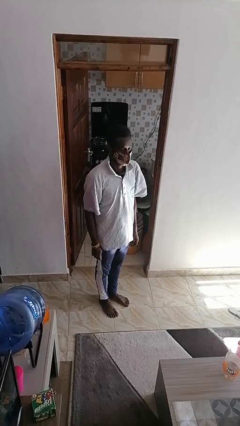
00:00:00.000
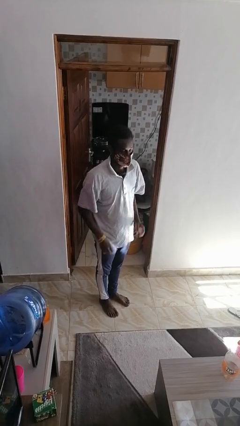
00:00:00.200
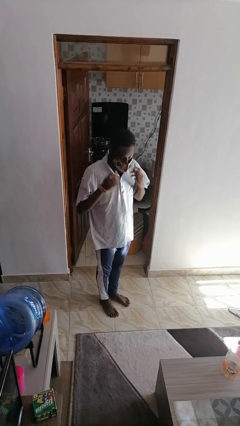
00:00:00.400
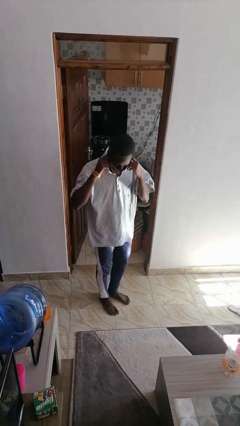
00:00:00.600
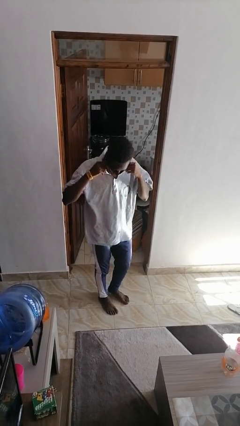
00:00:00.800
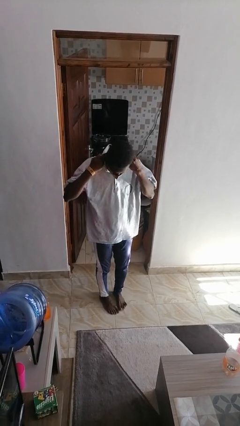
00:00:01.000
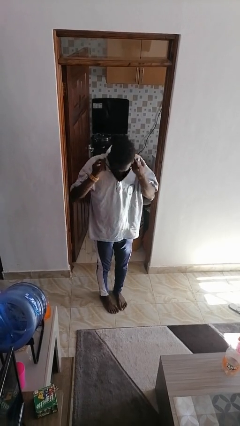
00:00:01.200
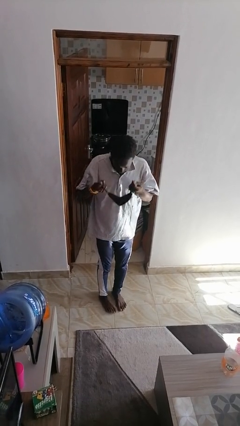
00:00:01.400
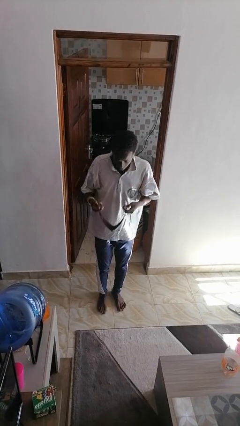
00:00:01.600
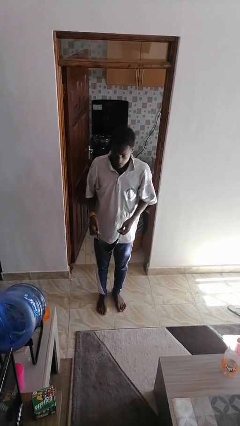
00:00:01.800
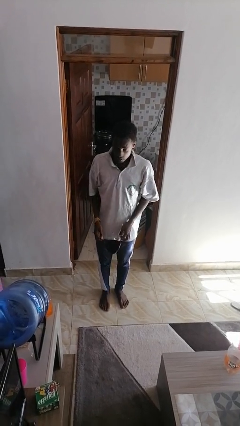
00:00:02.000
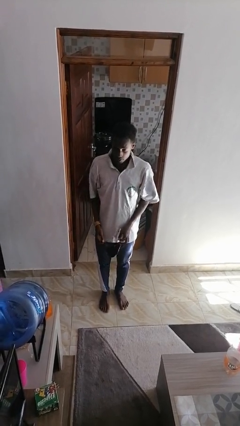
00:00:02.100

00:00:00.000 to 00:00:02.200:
person takes off facemask

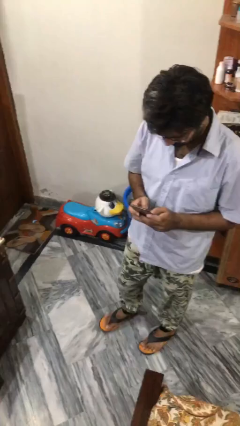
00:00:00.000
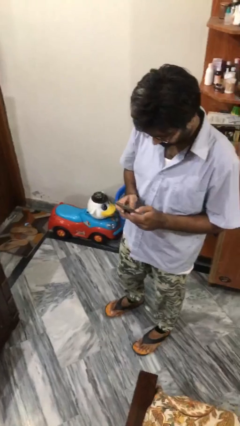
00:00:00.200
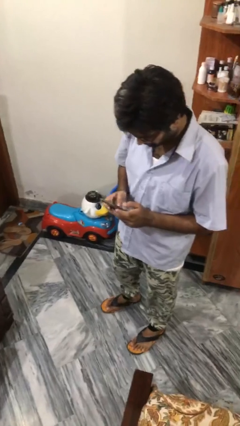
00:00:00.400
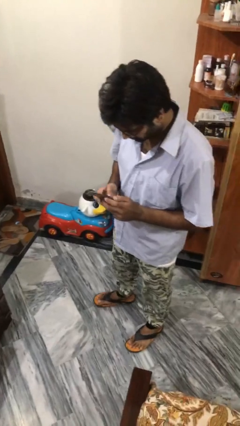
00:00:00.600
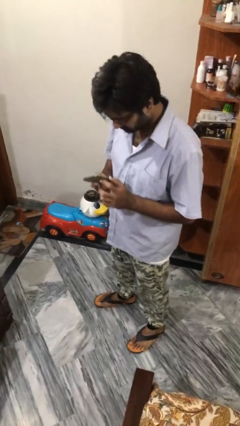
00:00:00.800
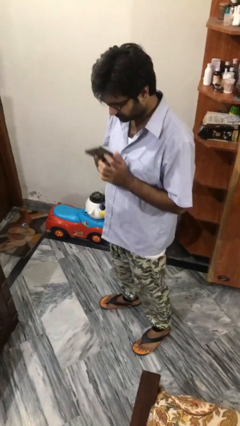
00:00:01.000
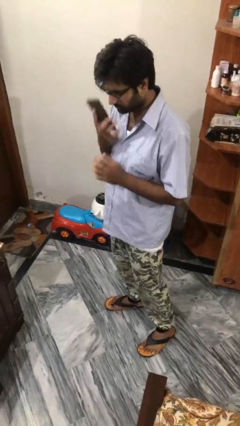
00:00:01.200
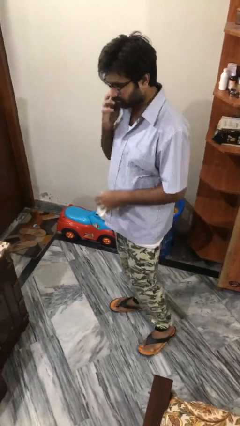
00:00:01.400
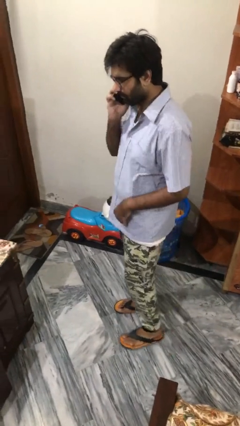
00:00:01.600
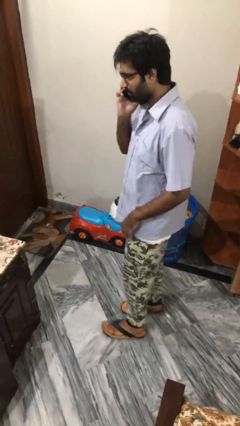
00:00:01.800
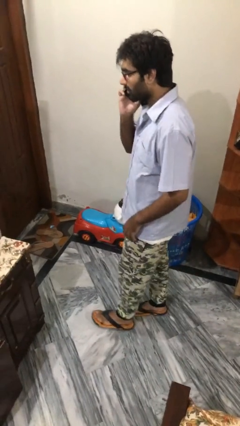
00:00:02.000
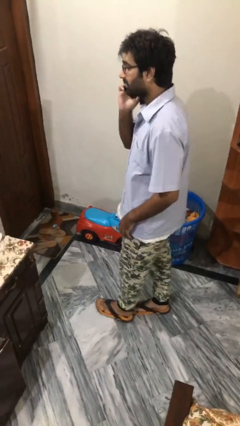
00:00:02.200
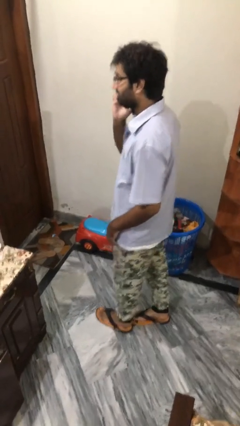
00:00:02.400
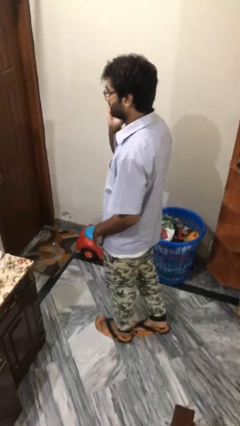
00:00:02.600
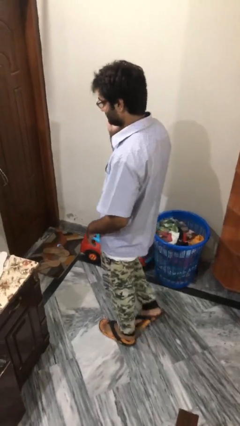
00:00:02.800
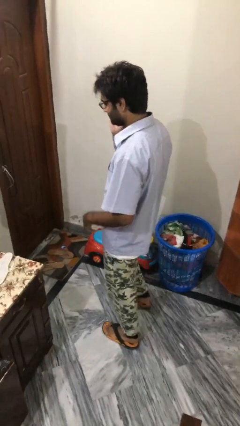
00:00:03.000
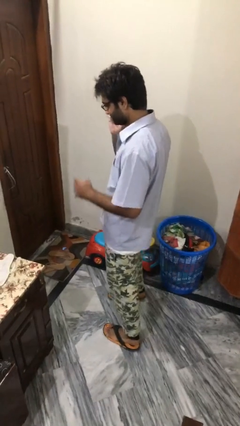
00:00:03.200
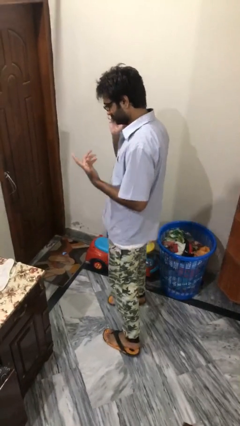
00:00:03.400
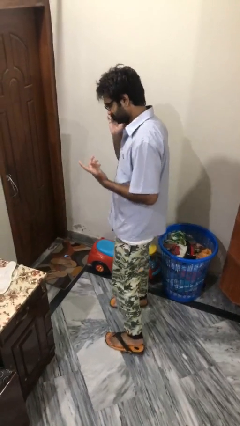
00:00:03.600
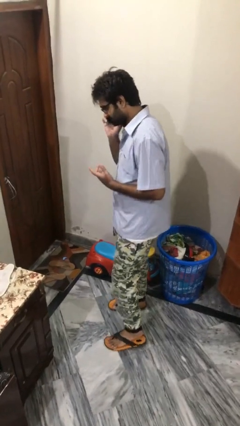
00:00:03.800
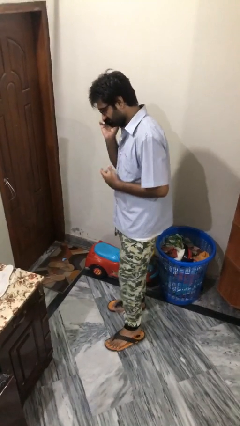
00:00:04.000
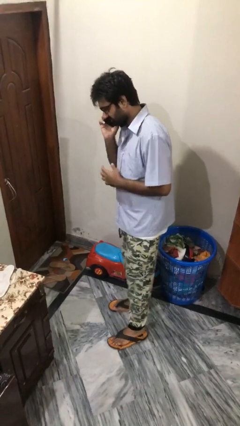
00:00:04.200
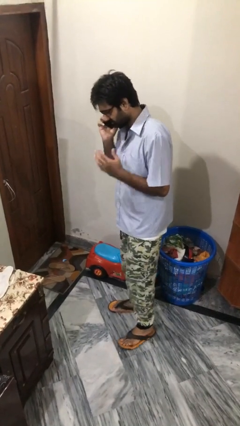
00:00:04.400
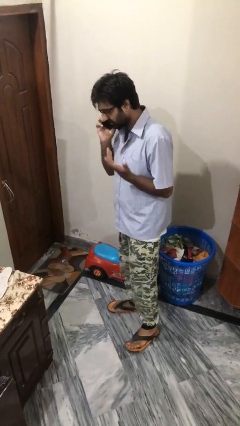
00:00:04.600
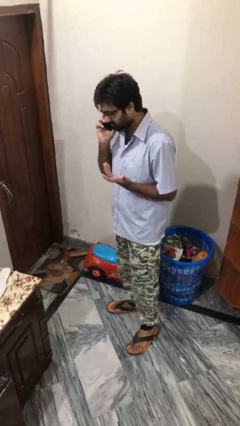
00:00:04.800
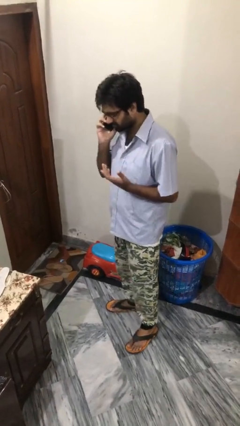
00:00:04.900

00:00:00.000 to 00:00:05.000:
person talks on phone

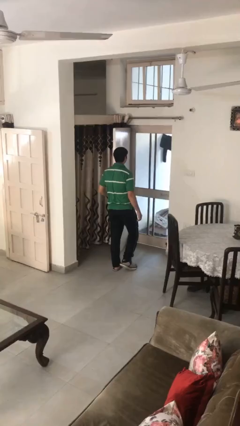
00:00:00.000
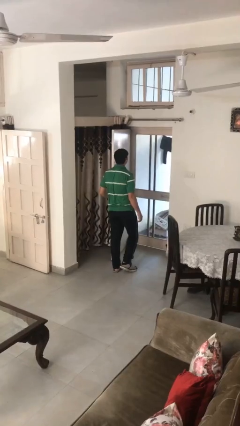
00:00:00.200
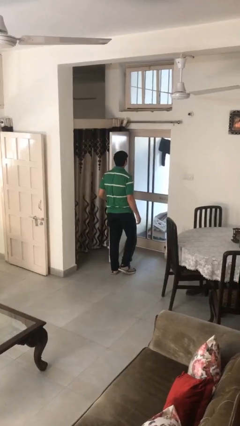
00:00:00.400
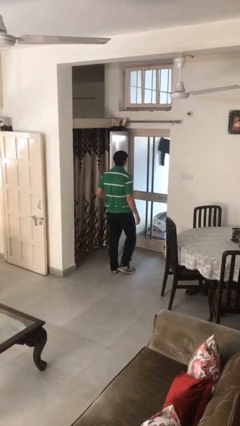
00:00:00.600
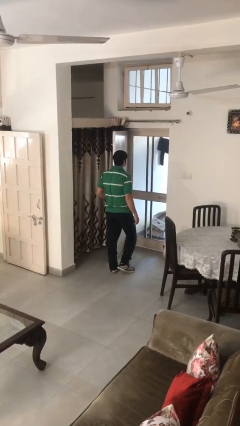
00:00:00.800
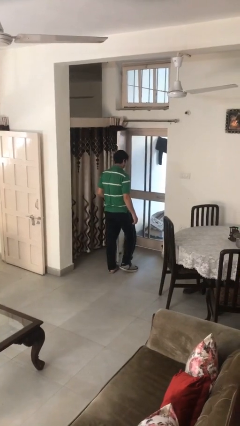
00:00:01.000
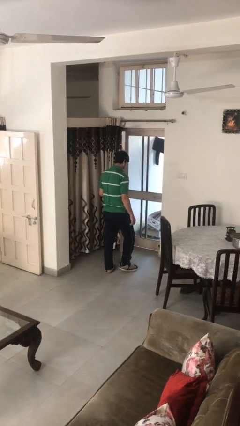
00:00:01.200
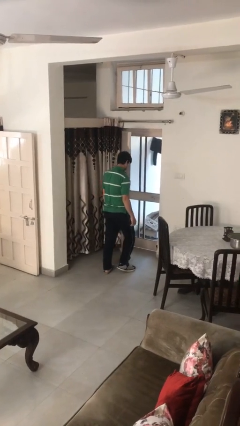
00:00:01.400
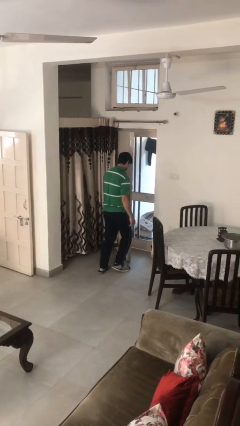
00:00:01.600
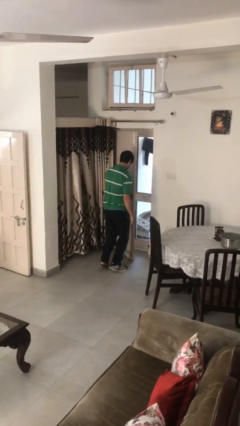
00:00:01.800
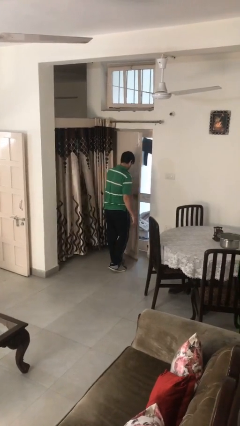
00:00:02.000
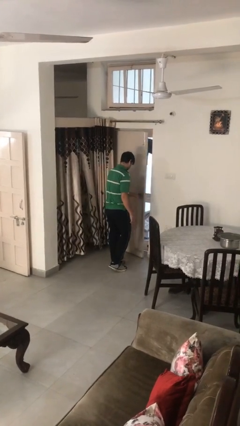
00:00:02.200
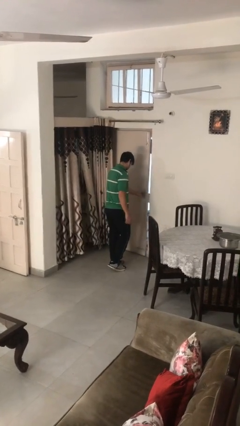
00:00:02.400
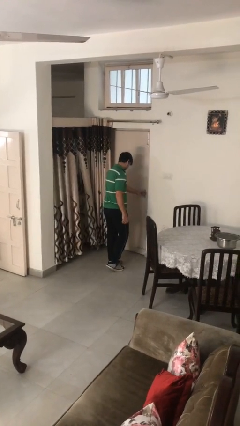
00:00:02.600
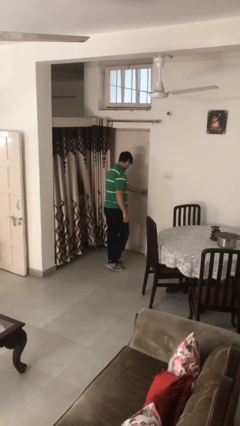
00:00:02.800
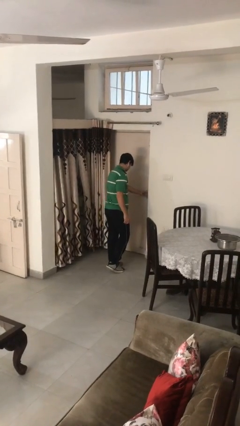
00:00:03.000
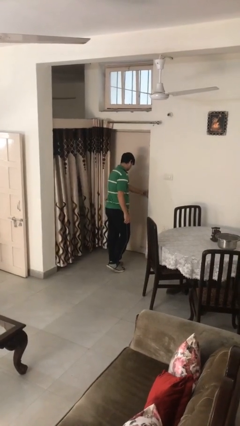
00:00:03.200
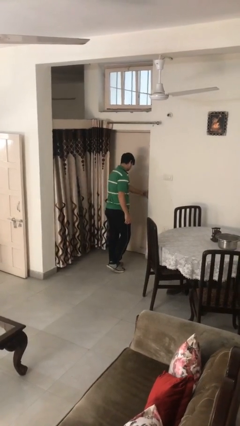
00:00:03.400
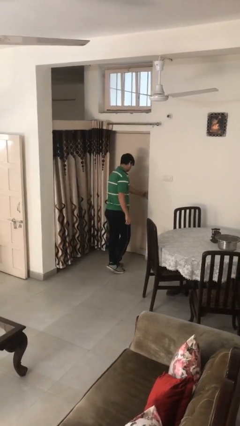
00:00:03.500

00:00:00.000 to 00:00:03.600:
person closes facility door

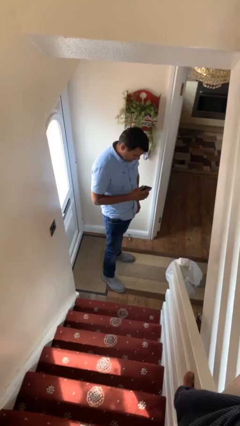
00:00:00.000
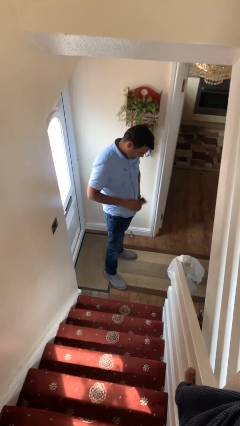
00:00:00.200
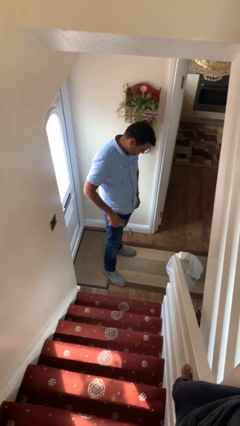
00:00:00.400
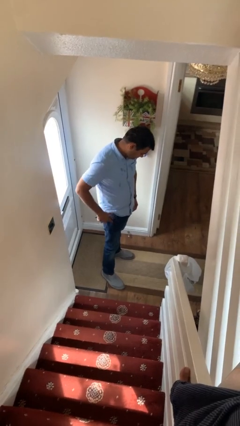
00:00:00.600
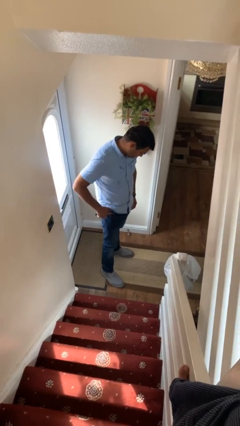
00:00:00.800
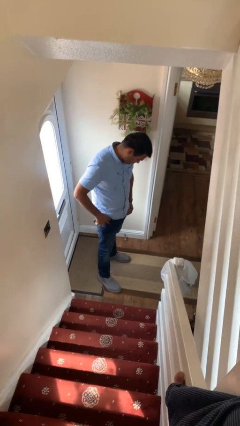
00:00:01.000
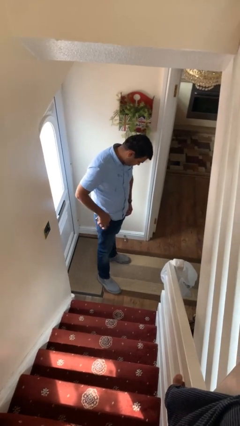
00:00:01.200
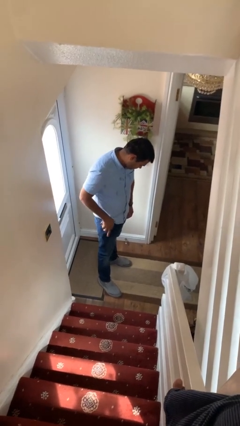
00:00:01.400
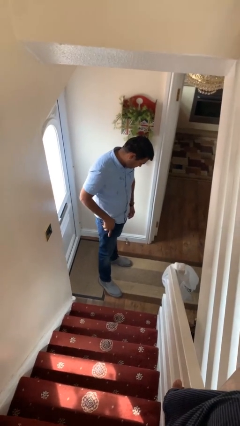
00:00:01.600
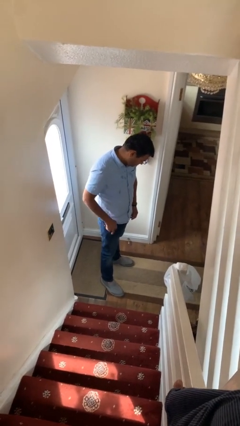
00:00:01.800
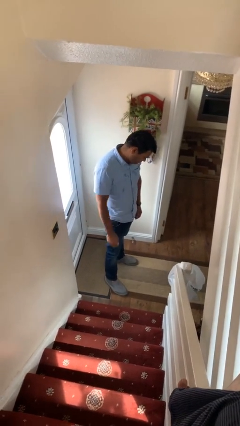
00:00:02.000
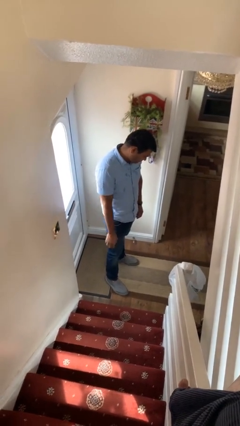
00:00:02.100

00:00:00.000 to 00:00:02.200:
person puts phone into pocket

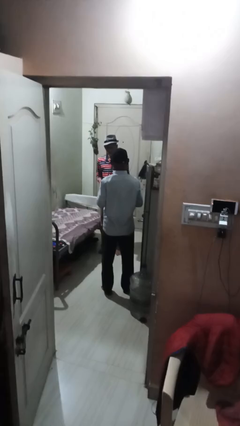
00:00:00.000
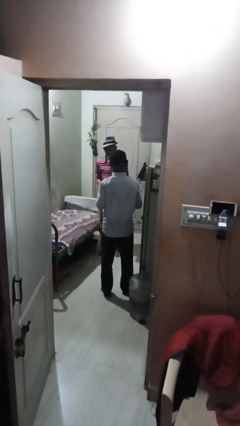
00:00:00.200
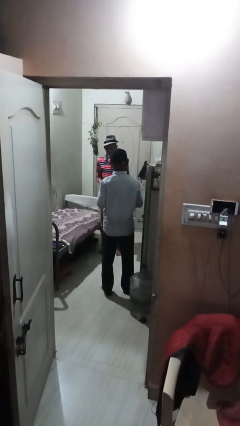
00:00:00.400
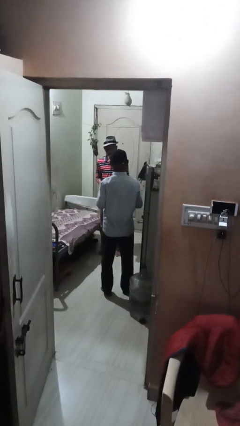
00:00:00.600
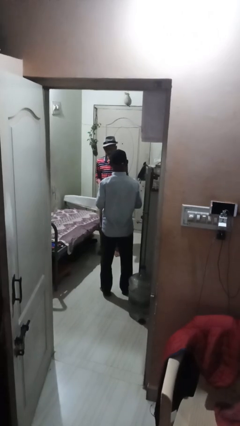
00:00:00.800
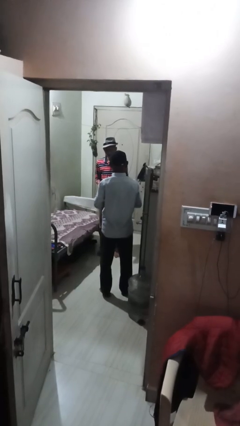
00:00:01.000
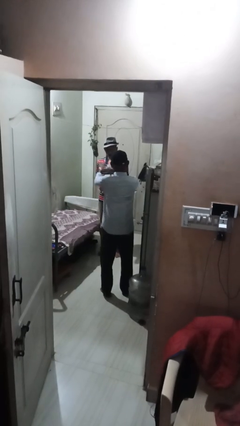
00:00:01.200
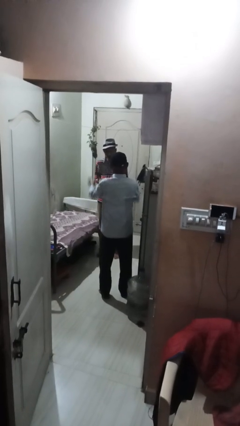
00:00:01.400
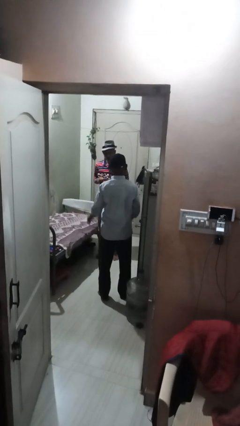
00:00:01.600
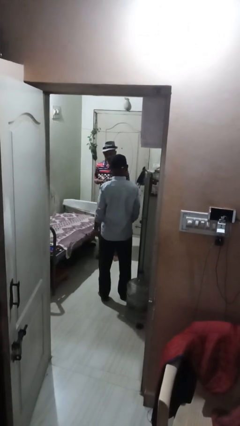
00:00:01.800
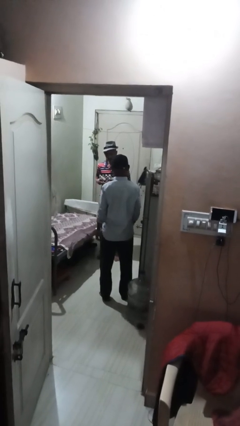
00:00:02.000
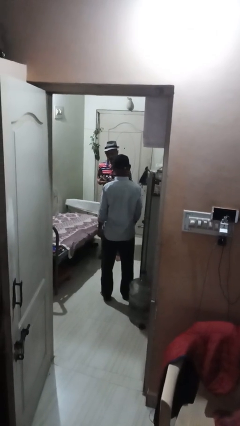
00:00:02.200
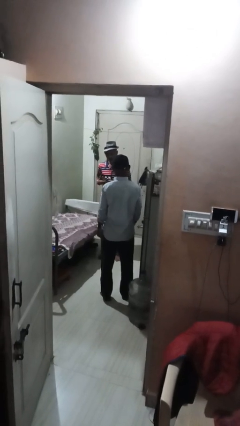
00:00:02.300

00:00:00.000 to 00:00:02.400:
person catches object from person

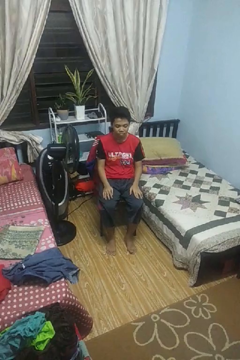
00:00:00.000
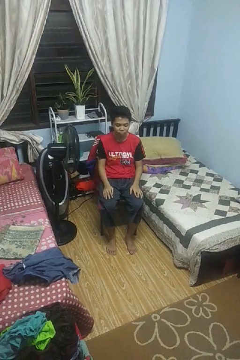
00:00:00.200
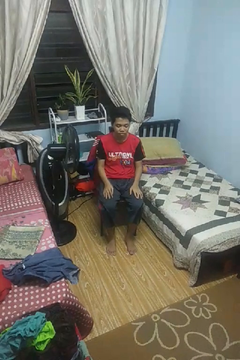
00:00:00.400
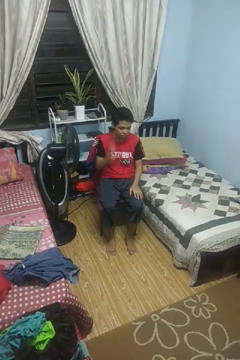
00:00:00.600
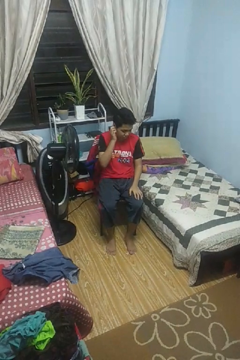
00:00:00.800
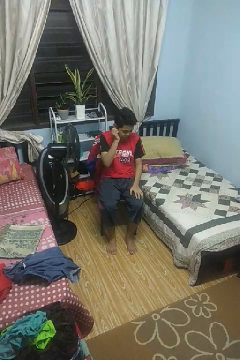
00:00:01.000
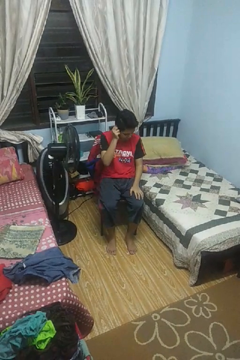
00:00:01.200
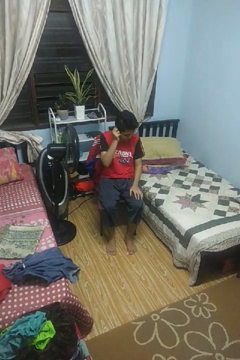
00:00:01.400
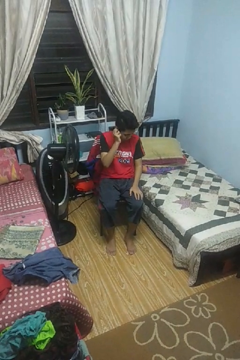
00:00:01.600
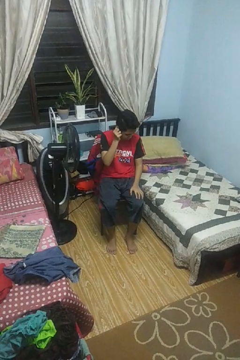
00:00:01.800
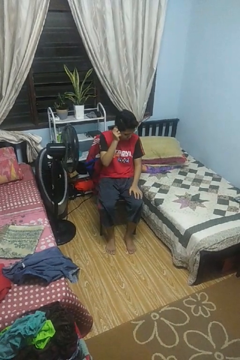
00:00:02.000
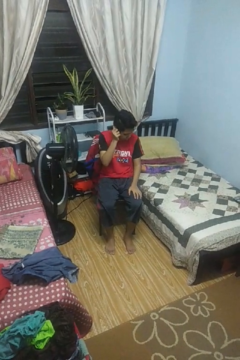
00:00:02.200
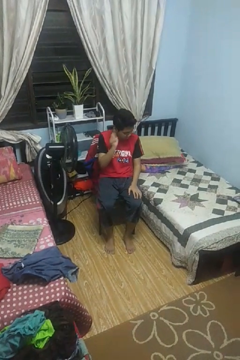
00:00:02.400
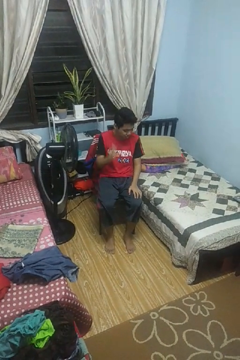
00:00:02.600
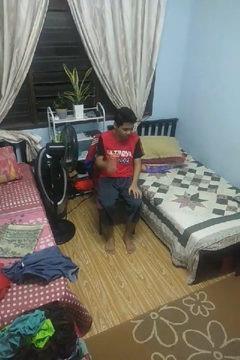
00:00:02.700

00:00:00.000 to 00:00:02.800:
person touches earlobe
